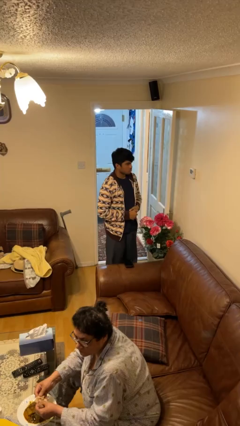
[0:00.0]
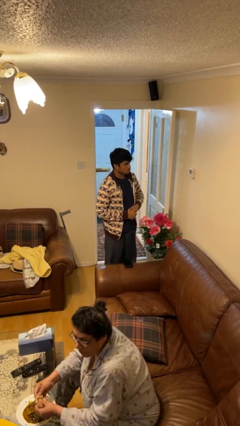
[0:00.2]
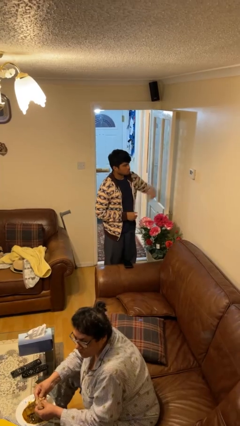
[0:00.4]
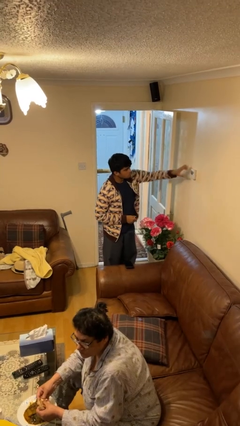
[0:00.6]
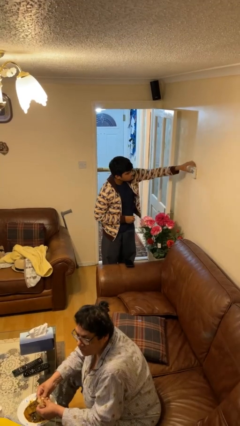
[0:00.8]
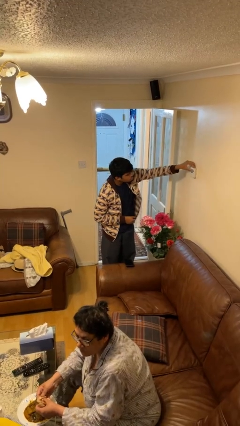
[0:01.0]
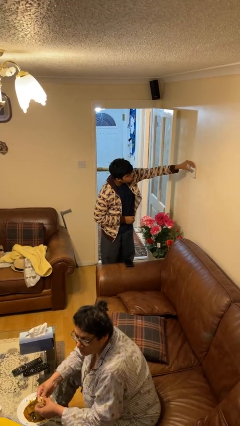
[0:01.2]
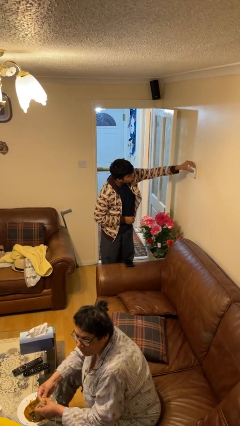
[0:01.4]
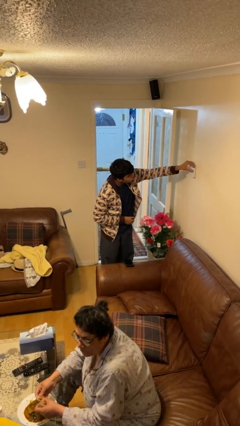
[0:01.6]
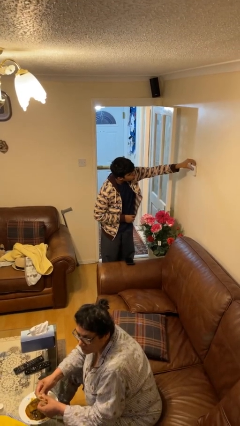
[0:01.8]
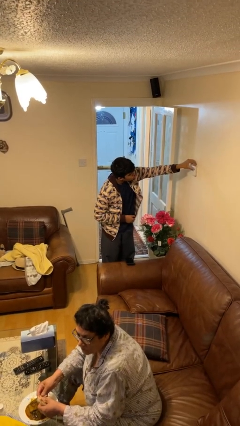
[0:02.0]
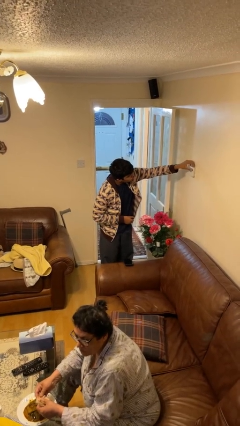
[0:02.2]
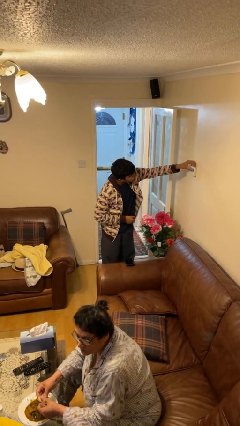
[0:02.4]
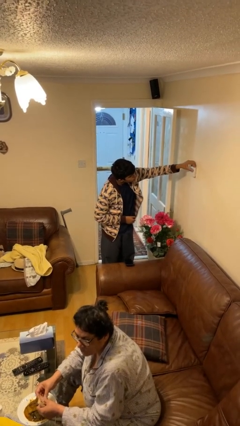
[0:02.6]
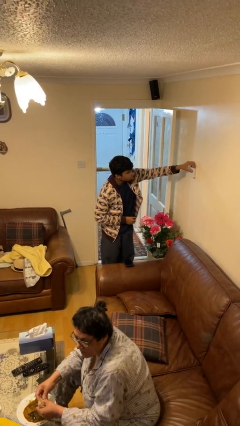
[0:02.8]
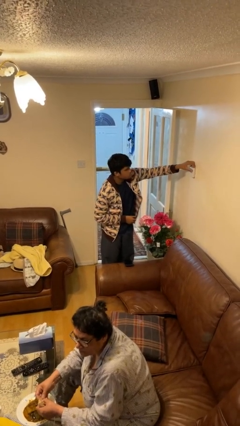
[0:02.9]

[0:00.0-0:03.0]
person adjusts thermostat

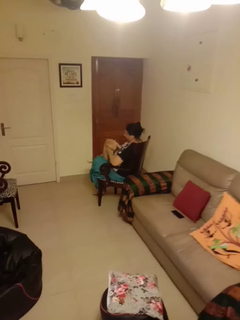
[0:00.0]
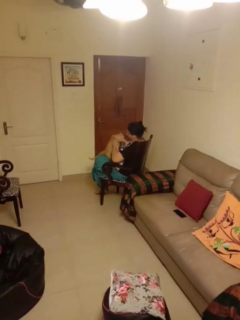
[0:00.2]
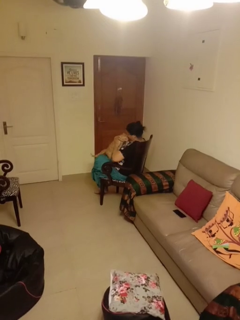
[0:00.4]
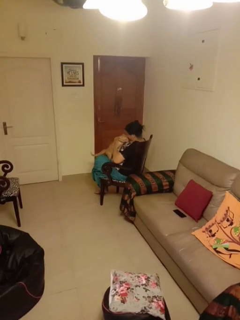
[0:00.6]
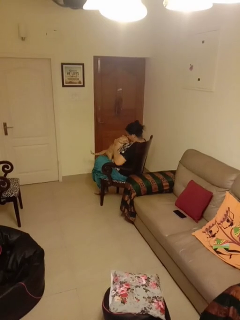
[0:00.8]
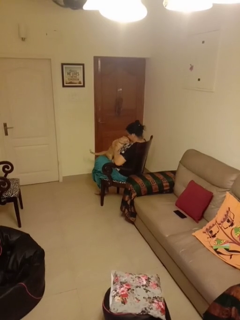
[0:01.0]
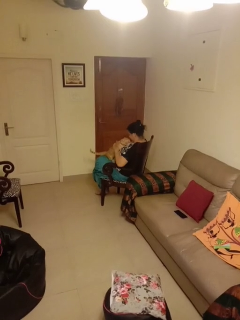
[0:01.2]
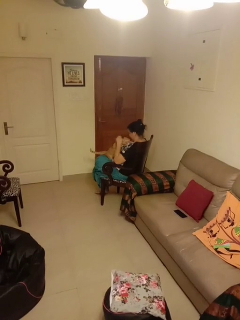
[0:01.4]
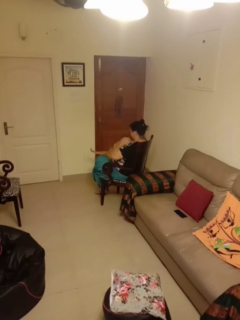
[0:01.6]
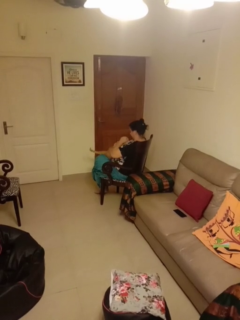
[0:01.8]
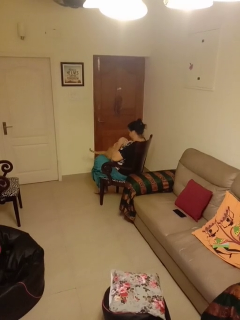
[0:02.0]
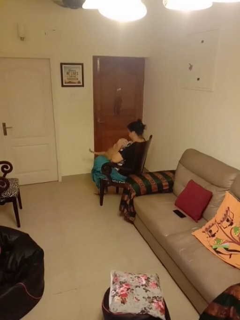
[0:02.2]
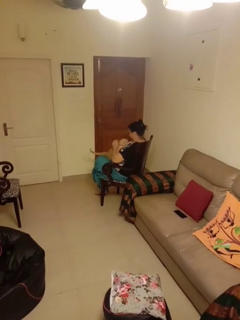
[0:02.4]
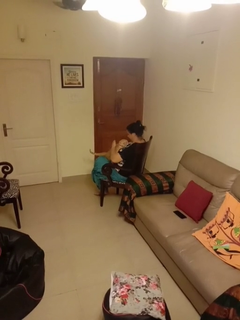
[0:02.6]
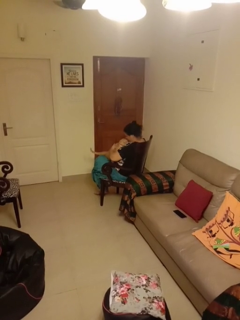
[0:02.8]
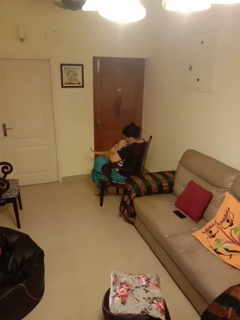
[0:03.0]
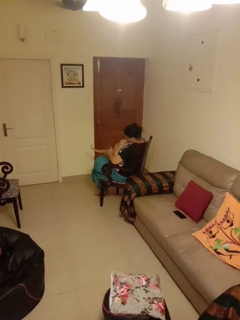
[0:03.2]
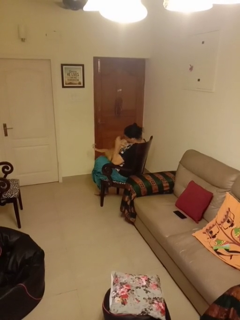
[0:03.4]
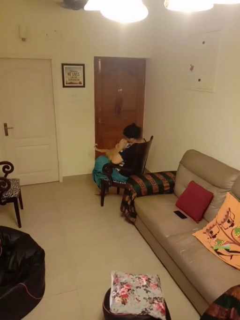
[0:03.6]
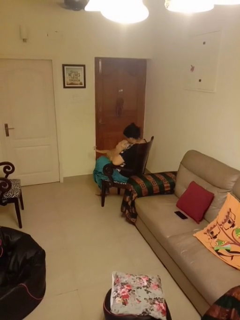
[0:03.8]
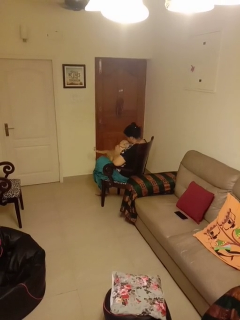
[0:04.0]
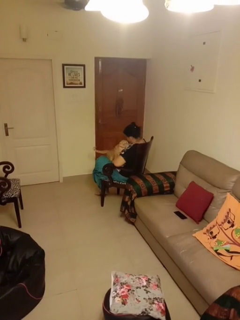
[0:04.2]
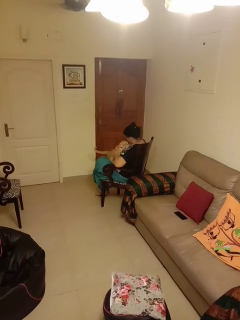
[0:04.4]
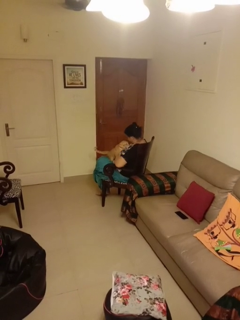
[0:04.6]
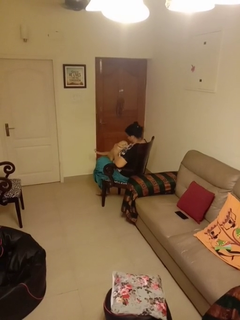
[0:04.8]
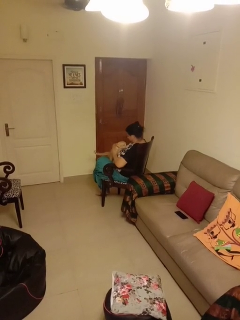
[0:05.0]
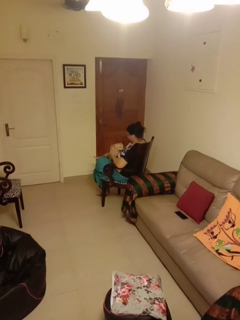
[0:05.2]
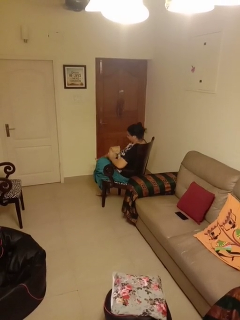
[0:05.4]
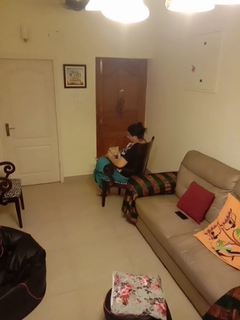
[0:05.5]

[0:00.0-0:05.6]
person hugs cat

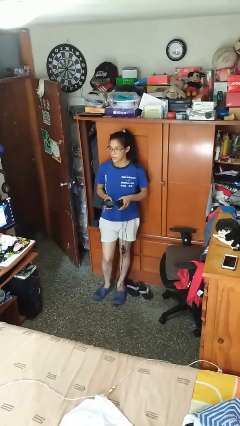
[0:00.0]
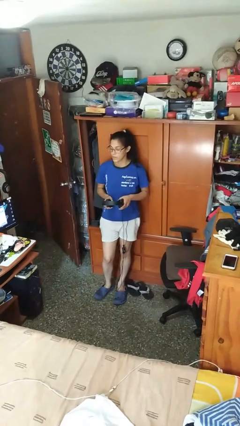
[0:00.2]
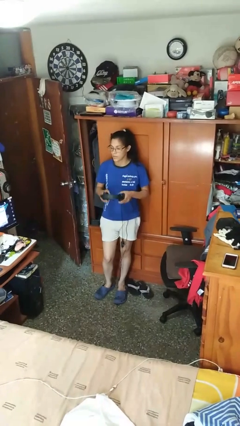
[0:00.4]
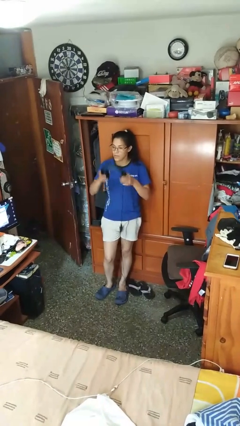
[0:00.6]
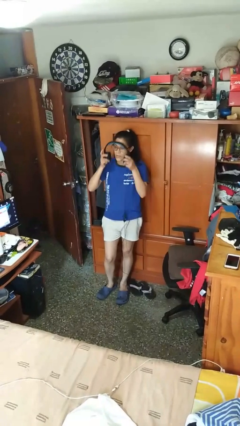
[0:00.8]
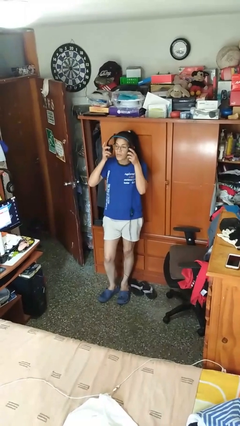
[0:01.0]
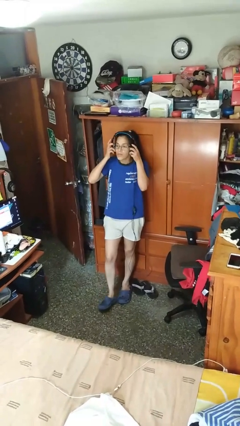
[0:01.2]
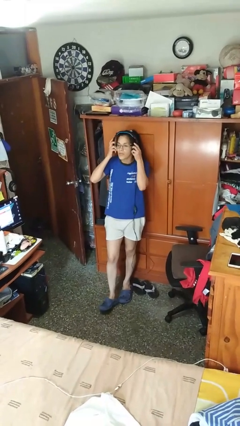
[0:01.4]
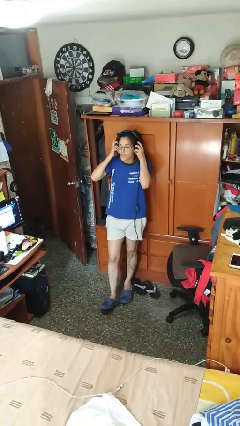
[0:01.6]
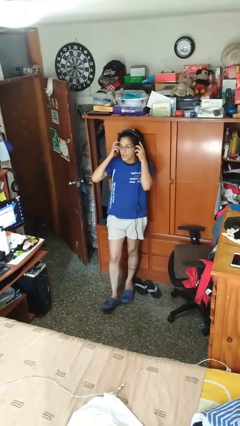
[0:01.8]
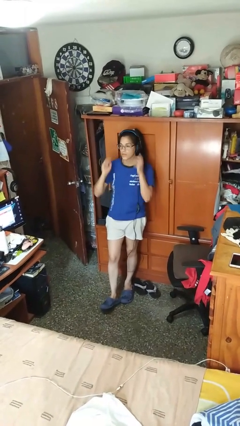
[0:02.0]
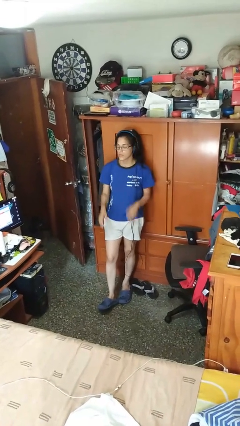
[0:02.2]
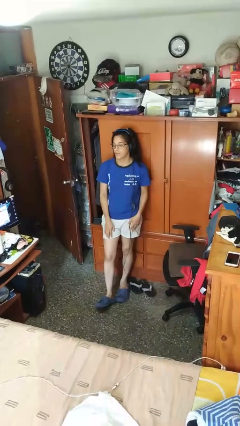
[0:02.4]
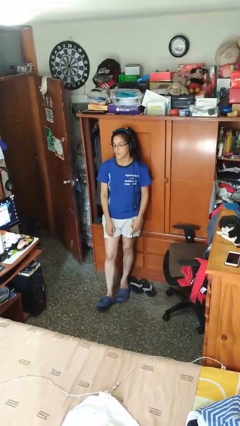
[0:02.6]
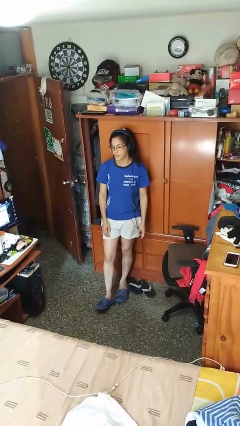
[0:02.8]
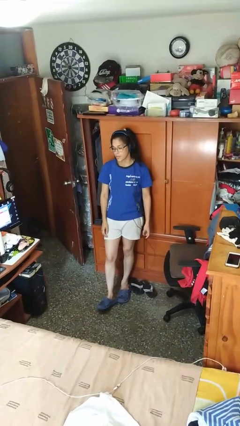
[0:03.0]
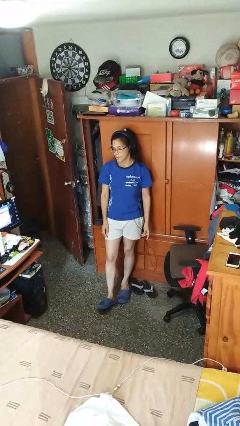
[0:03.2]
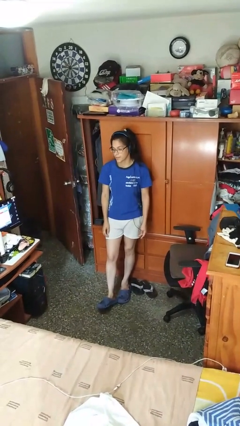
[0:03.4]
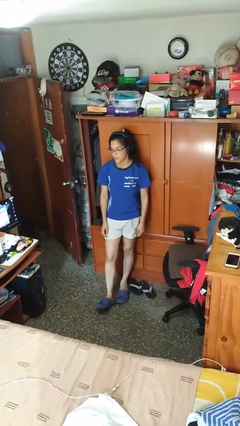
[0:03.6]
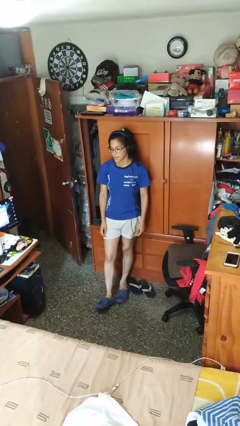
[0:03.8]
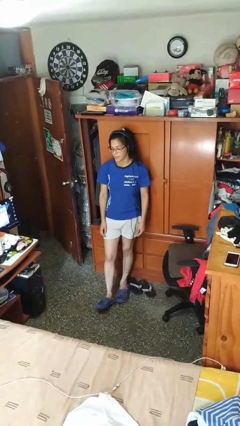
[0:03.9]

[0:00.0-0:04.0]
person puts on headphones

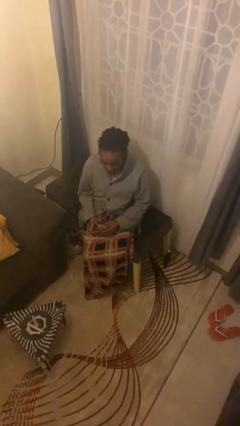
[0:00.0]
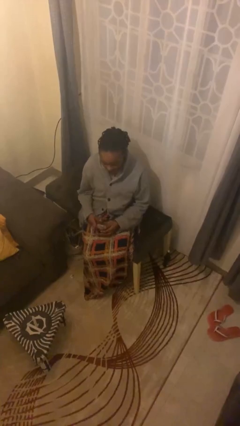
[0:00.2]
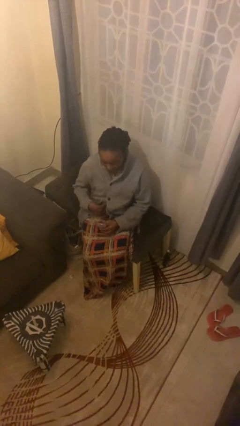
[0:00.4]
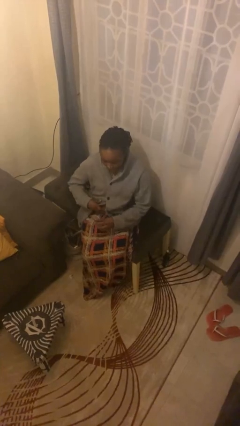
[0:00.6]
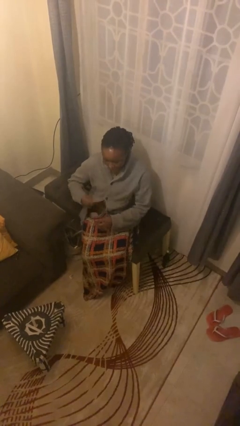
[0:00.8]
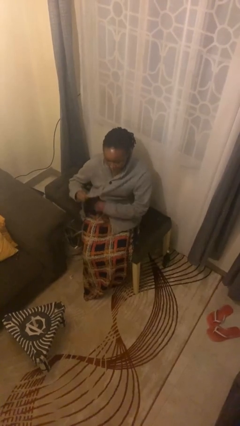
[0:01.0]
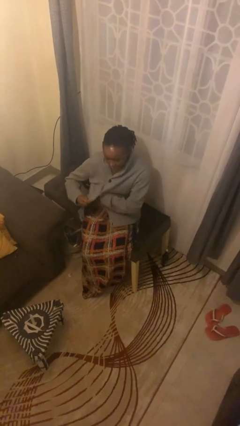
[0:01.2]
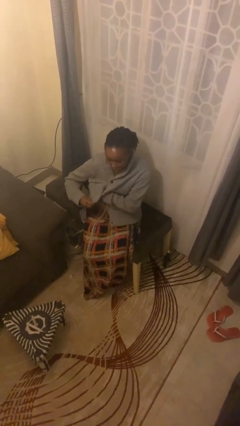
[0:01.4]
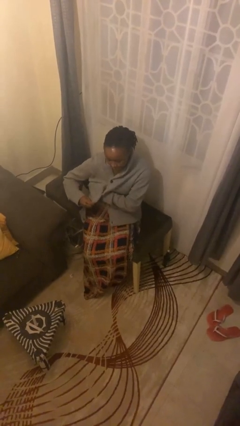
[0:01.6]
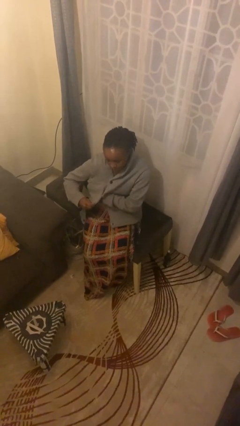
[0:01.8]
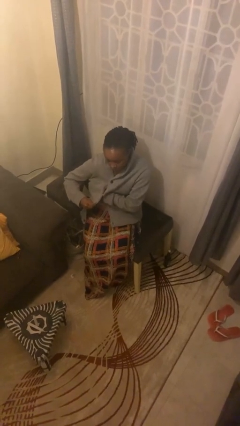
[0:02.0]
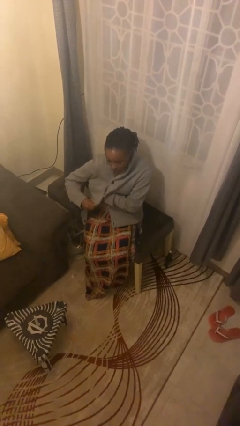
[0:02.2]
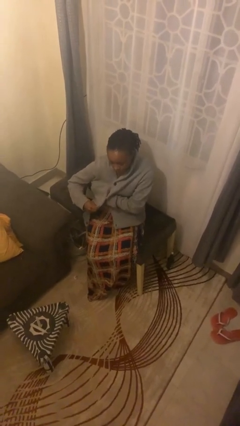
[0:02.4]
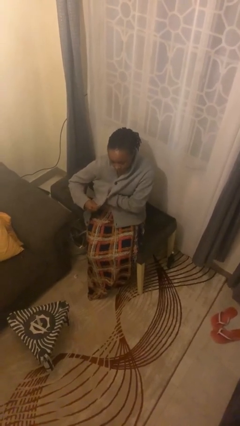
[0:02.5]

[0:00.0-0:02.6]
person applies deodorant

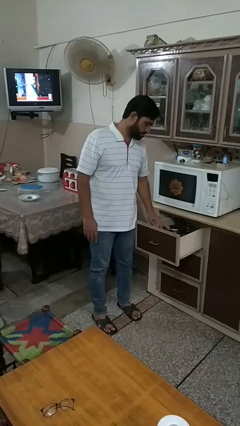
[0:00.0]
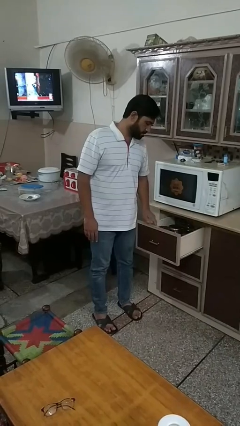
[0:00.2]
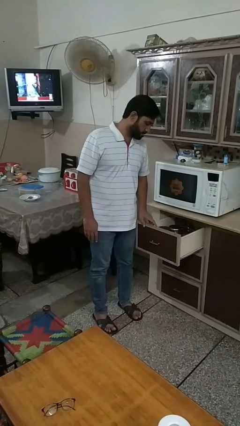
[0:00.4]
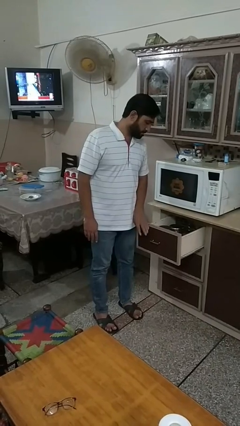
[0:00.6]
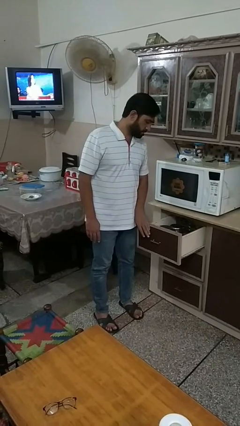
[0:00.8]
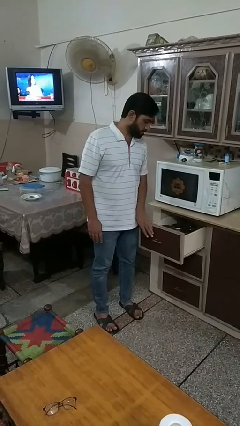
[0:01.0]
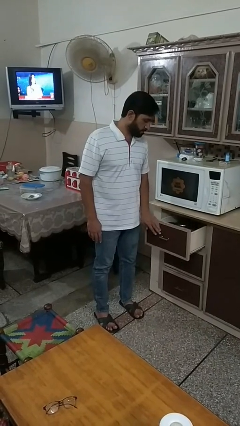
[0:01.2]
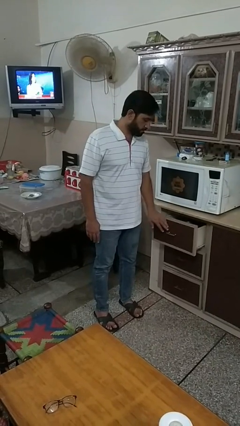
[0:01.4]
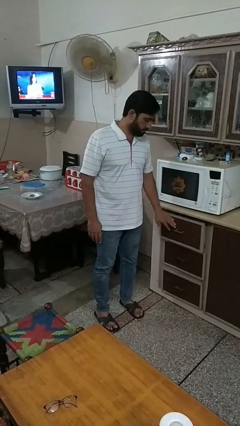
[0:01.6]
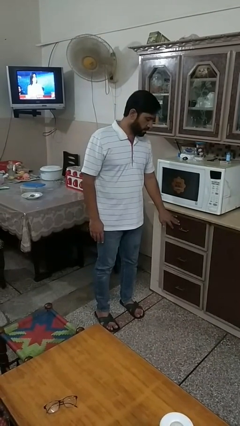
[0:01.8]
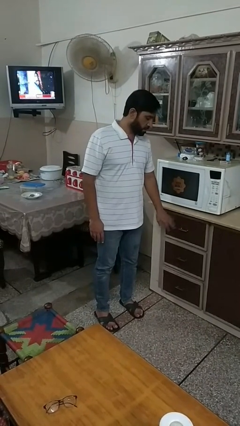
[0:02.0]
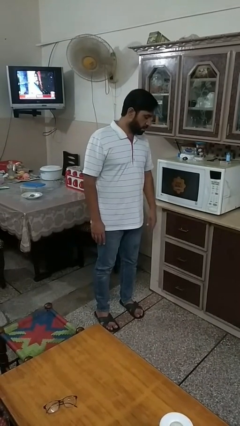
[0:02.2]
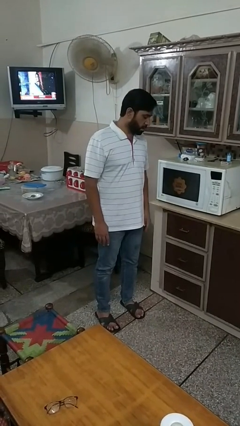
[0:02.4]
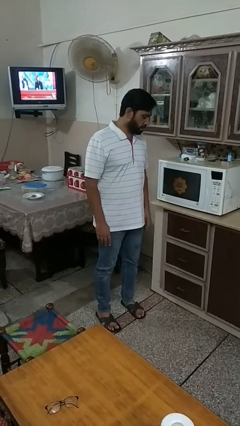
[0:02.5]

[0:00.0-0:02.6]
person closes kitchen drawer

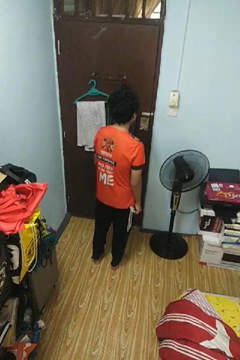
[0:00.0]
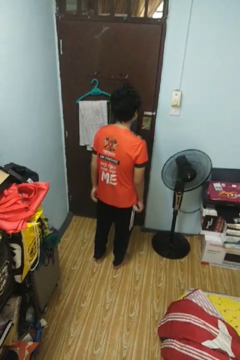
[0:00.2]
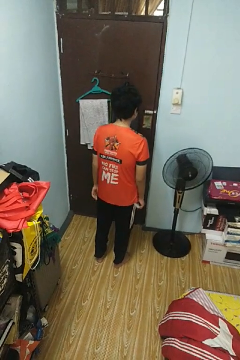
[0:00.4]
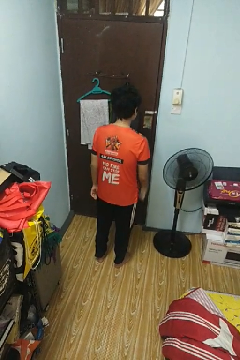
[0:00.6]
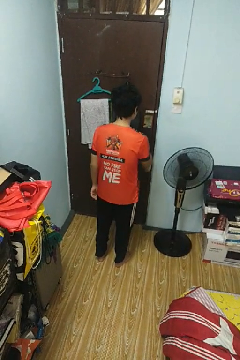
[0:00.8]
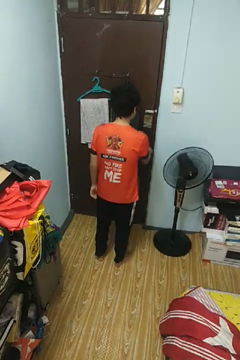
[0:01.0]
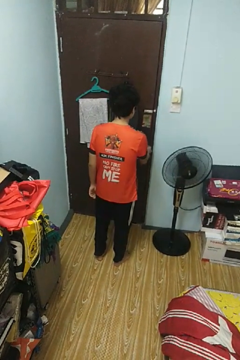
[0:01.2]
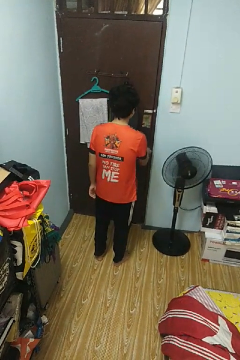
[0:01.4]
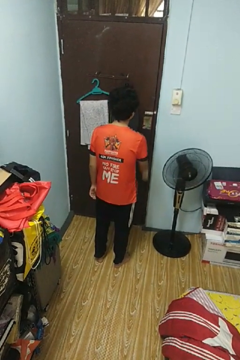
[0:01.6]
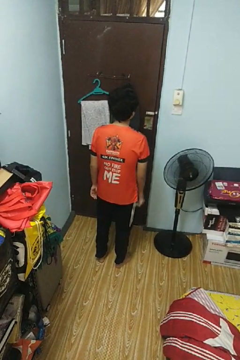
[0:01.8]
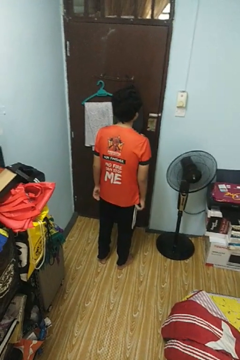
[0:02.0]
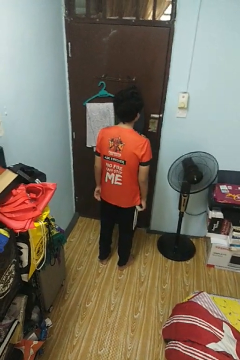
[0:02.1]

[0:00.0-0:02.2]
person locks door with keys
